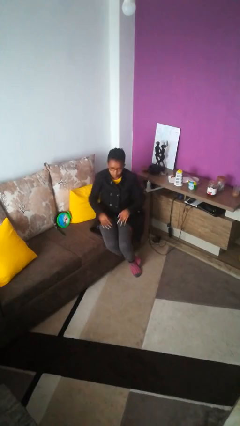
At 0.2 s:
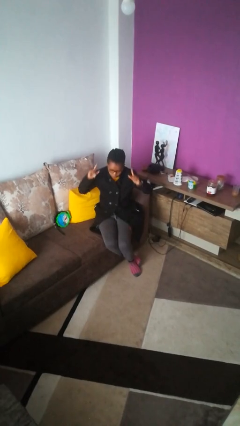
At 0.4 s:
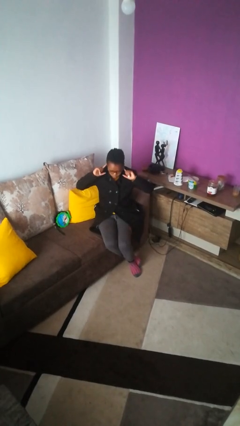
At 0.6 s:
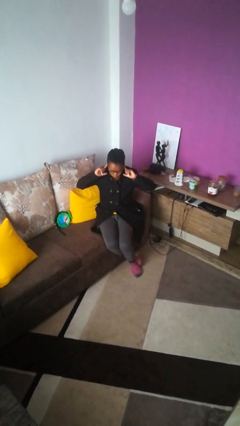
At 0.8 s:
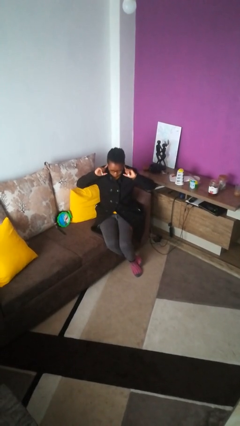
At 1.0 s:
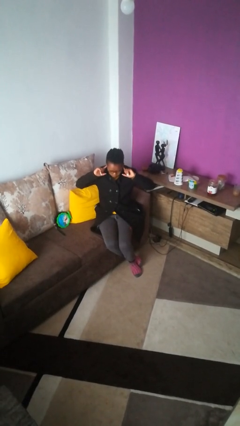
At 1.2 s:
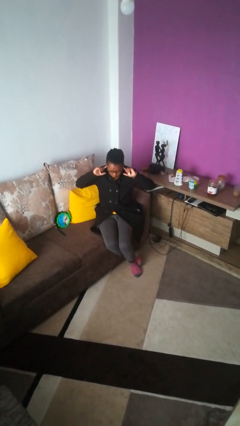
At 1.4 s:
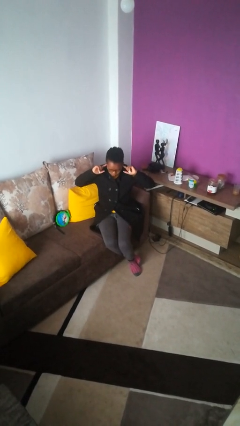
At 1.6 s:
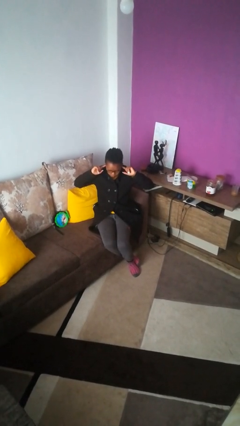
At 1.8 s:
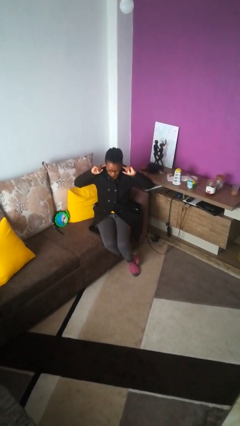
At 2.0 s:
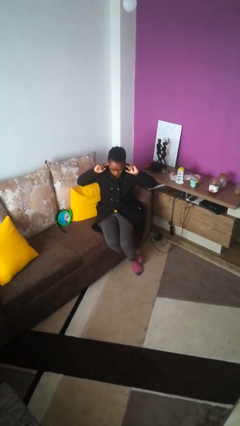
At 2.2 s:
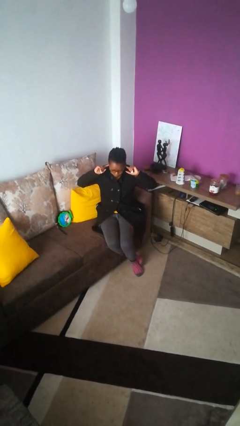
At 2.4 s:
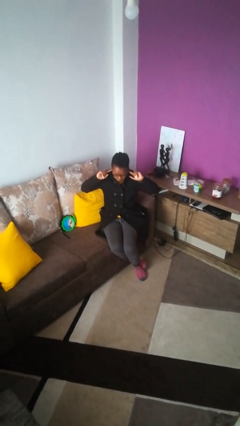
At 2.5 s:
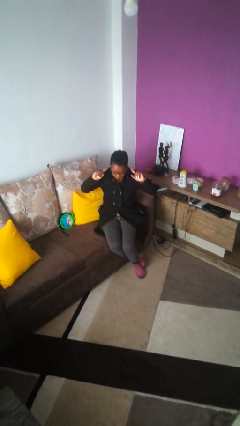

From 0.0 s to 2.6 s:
person puts fingers in ear

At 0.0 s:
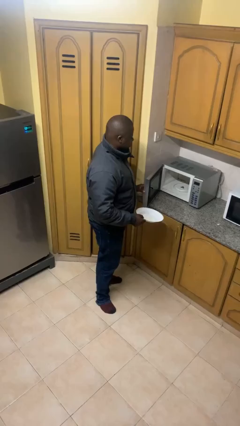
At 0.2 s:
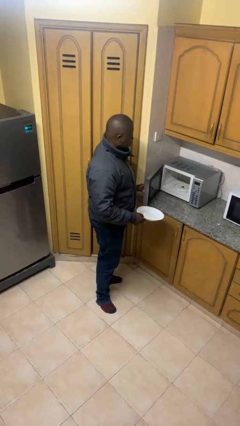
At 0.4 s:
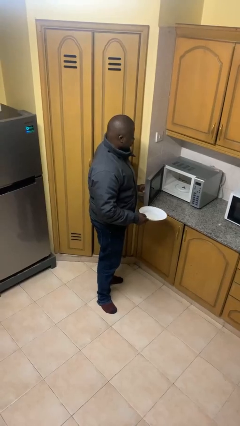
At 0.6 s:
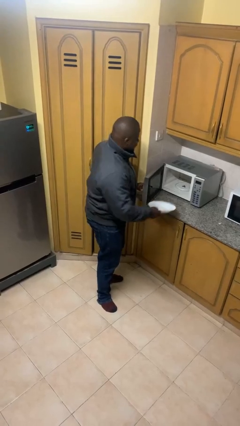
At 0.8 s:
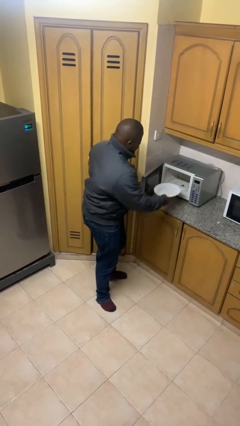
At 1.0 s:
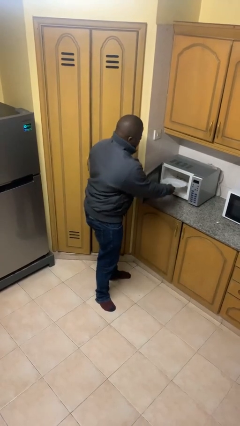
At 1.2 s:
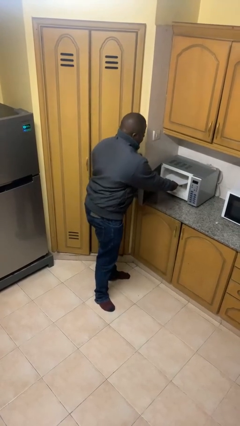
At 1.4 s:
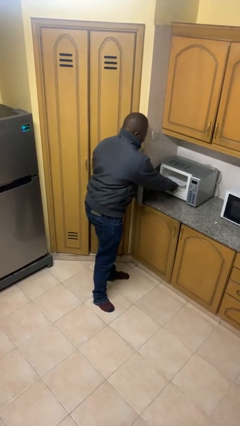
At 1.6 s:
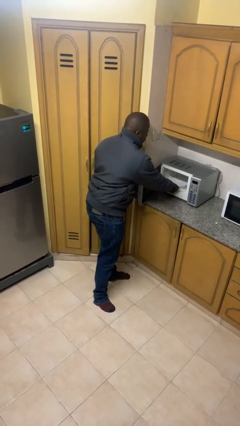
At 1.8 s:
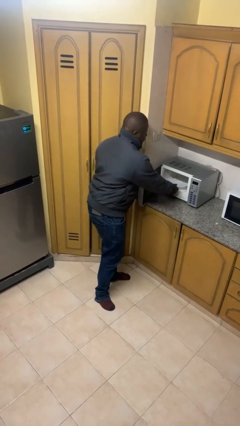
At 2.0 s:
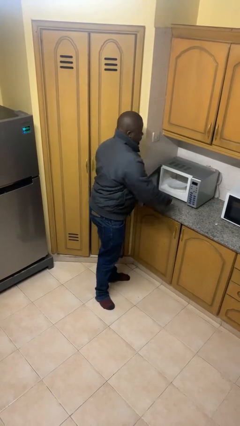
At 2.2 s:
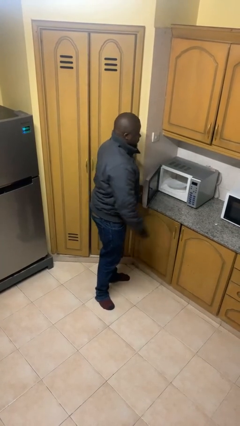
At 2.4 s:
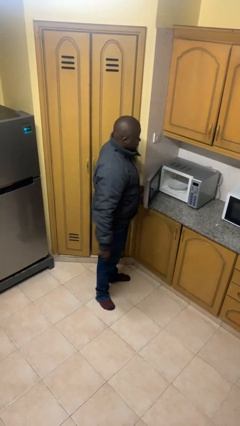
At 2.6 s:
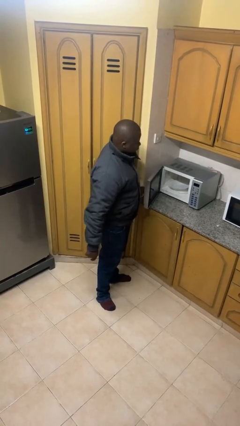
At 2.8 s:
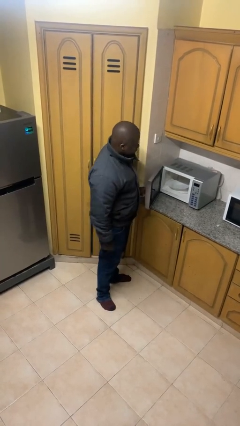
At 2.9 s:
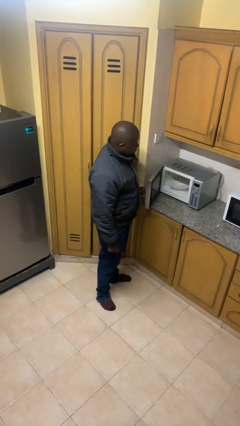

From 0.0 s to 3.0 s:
person puts object into microwave

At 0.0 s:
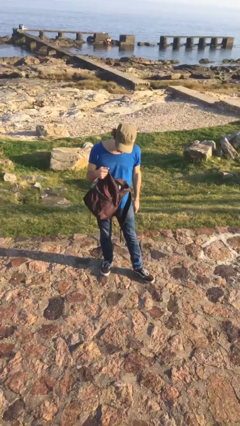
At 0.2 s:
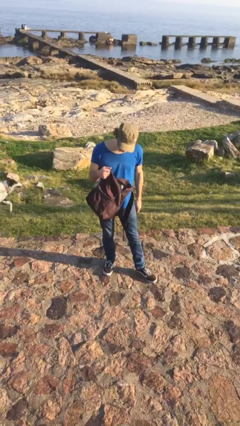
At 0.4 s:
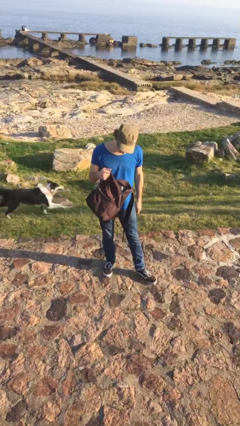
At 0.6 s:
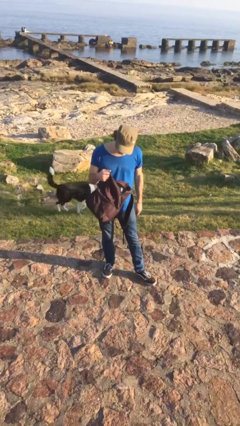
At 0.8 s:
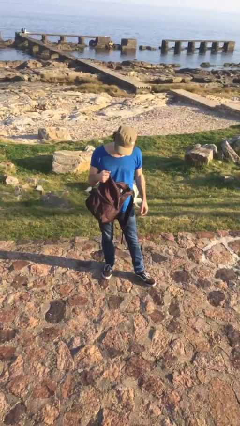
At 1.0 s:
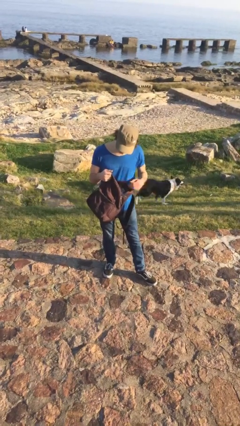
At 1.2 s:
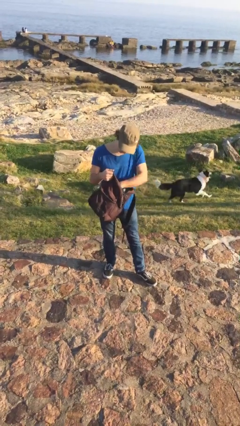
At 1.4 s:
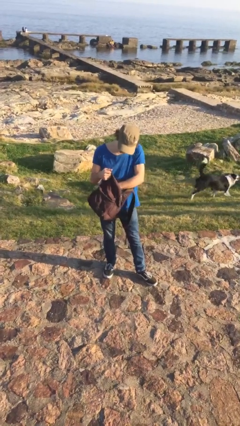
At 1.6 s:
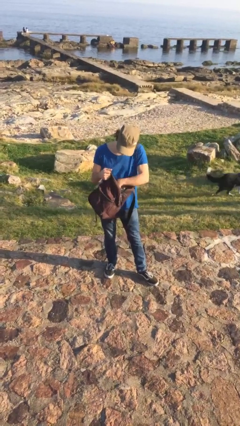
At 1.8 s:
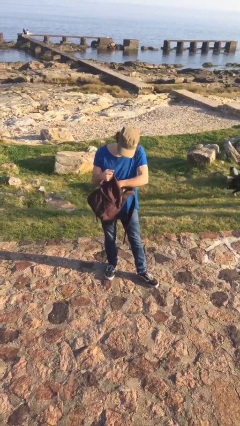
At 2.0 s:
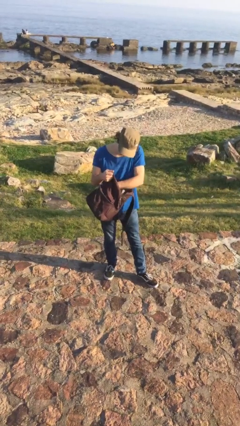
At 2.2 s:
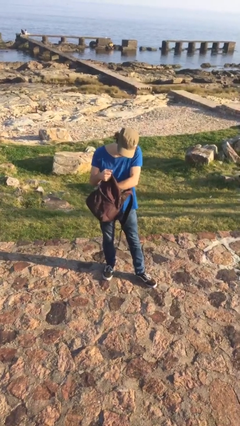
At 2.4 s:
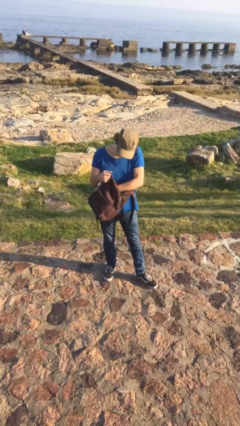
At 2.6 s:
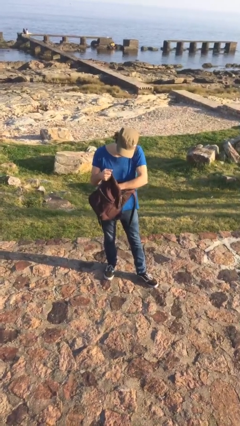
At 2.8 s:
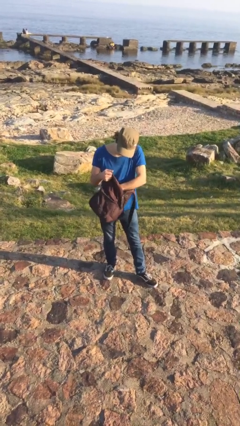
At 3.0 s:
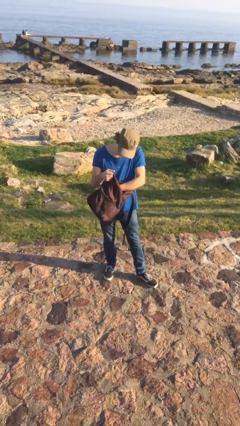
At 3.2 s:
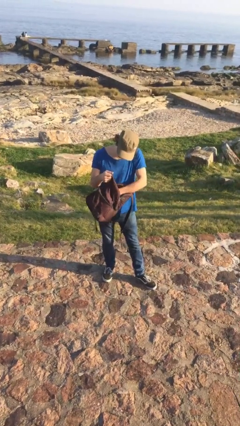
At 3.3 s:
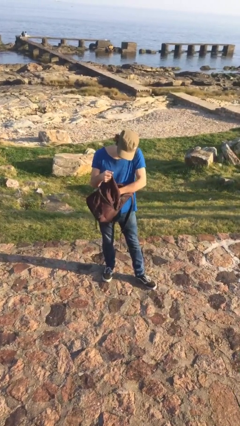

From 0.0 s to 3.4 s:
person searches in backpack

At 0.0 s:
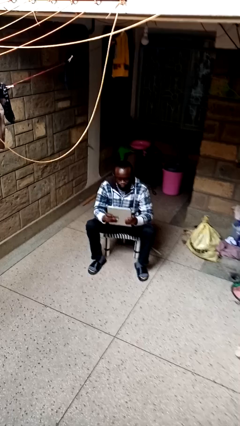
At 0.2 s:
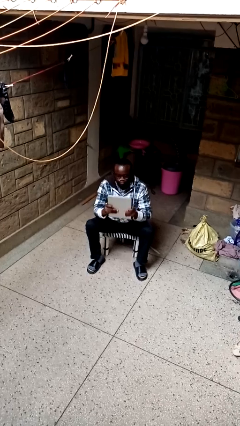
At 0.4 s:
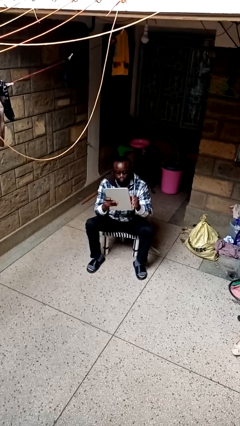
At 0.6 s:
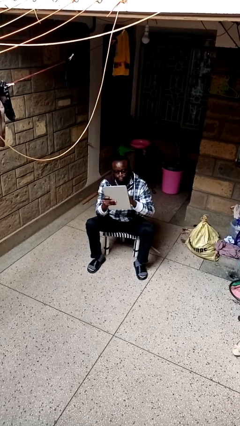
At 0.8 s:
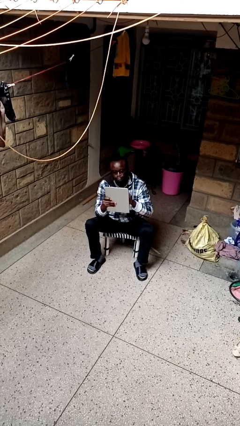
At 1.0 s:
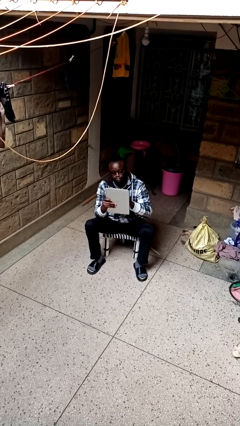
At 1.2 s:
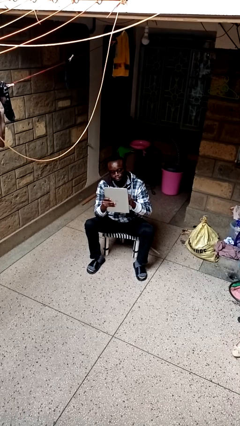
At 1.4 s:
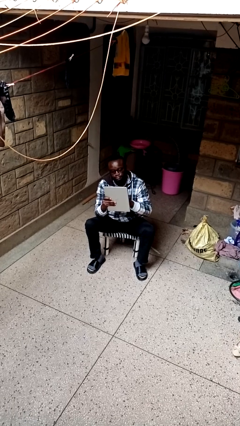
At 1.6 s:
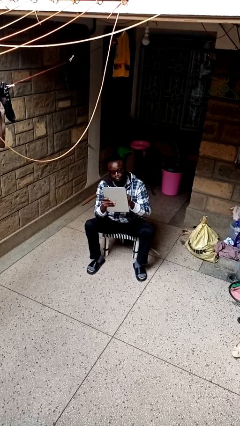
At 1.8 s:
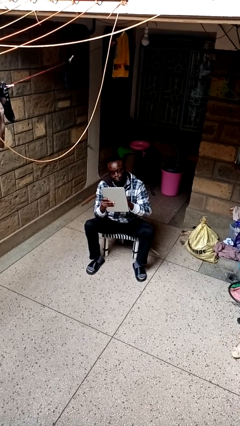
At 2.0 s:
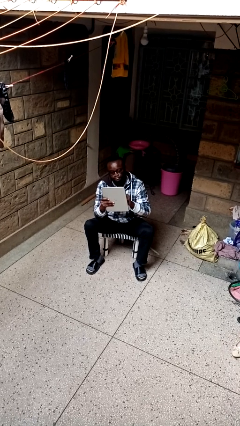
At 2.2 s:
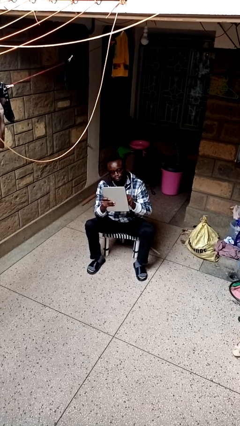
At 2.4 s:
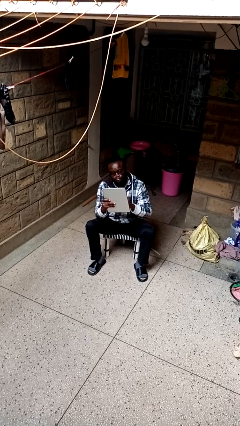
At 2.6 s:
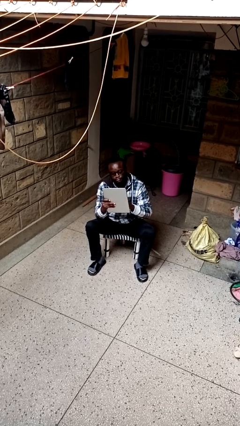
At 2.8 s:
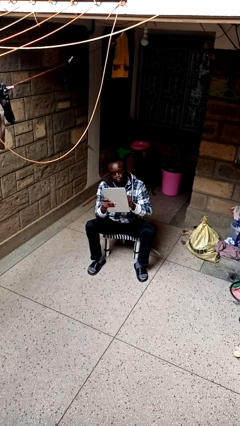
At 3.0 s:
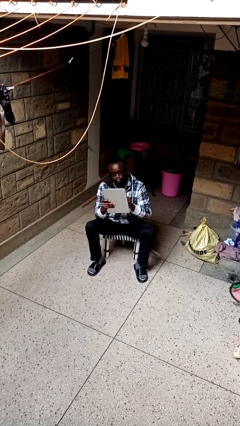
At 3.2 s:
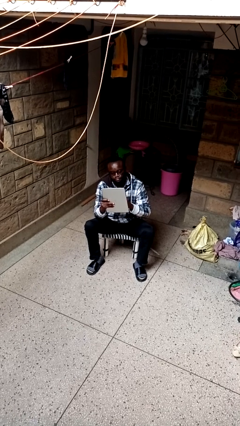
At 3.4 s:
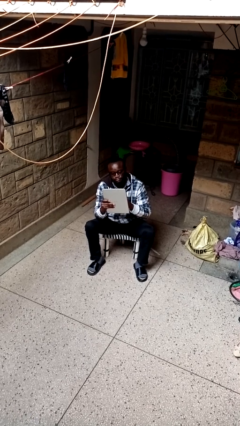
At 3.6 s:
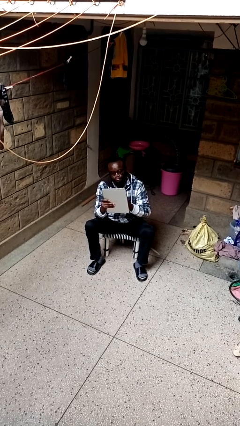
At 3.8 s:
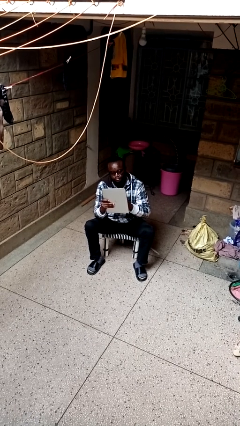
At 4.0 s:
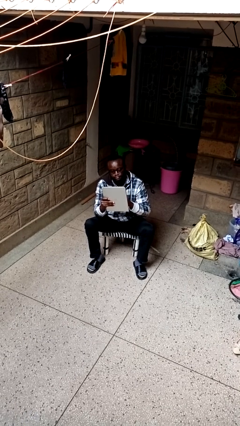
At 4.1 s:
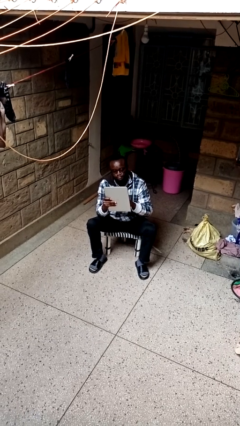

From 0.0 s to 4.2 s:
person interacts with tablet

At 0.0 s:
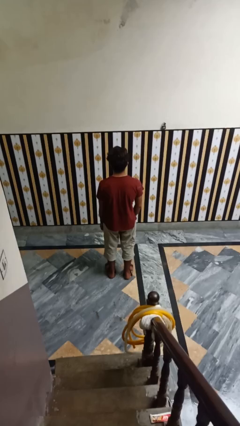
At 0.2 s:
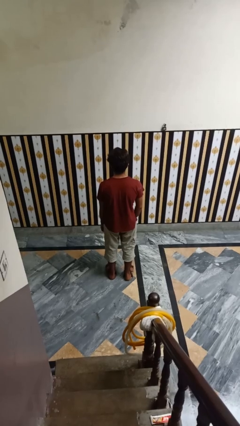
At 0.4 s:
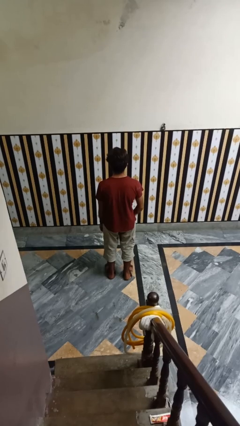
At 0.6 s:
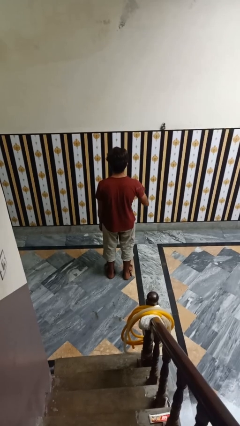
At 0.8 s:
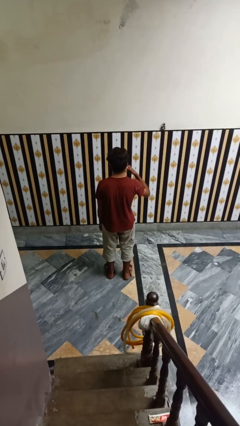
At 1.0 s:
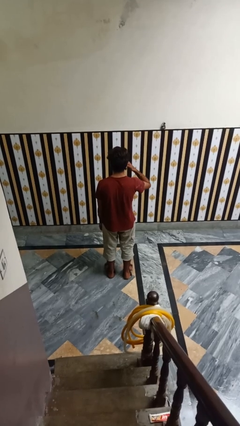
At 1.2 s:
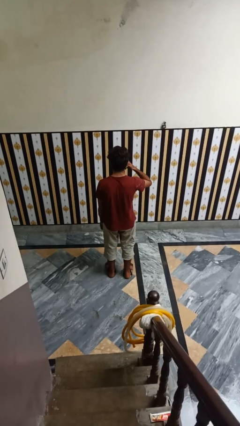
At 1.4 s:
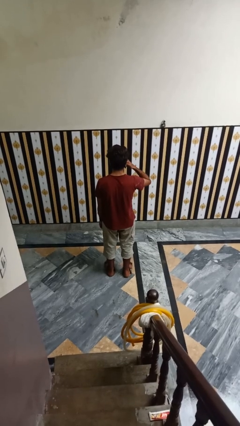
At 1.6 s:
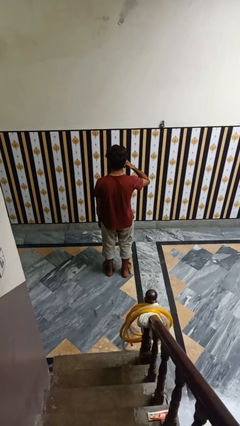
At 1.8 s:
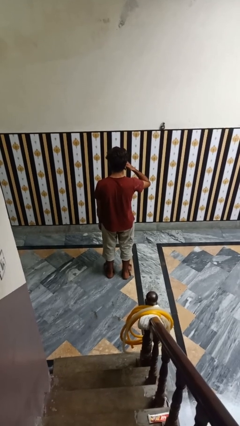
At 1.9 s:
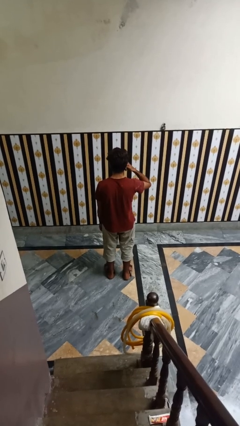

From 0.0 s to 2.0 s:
person gestures call me

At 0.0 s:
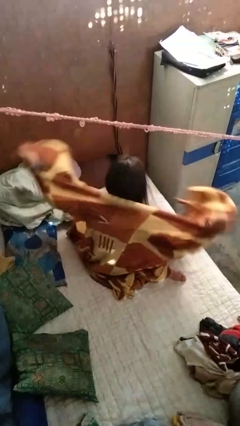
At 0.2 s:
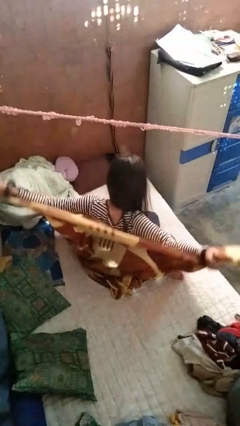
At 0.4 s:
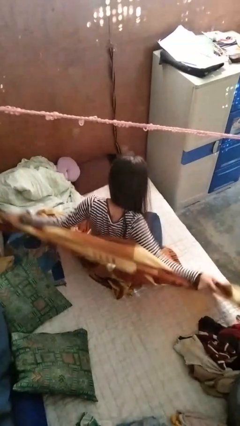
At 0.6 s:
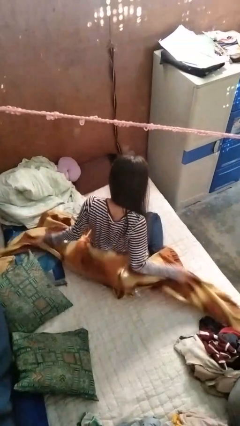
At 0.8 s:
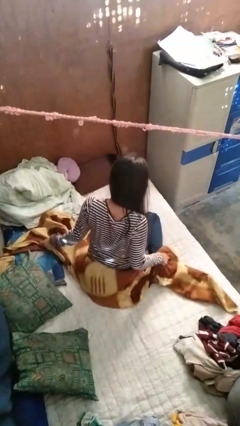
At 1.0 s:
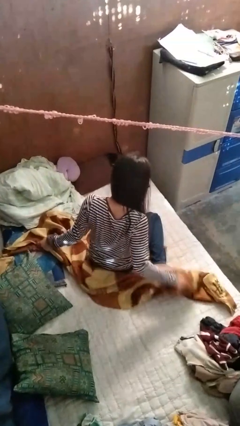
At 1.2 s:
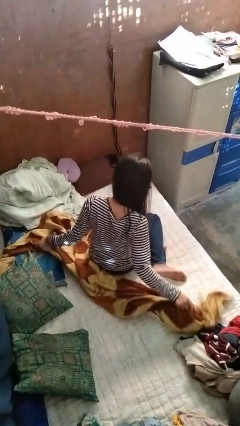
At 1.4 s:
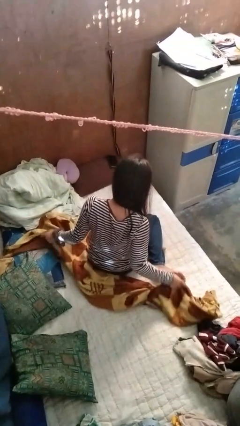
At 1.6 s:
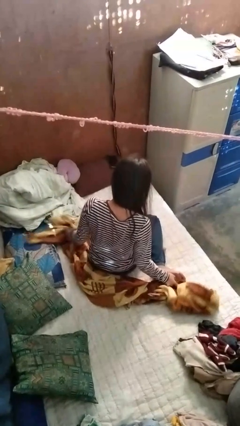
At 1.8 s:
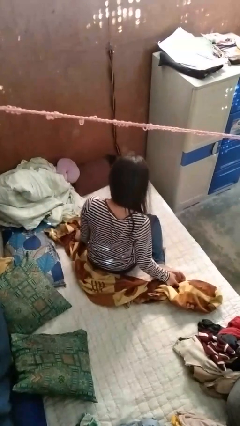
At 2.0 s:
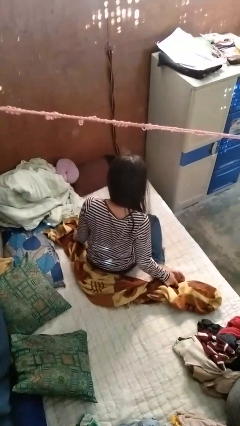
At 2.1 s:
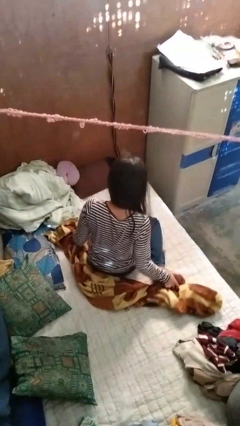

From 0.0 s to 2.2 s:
person uncovers with blanket
